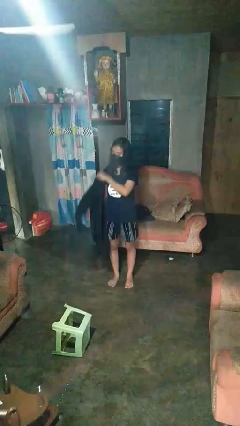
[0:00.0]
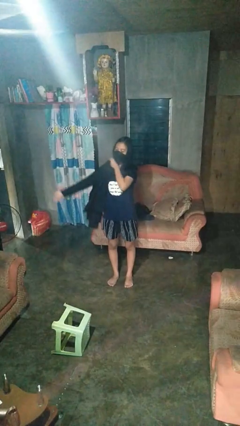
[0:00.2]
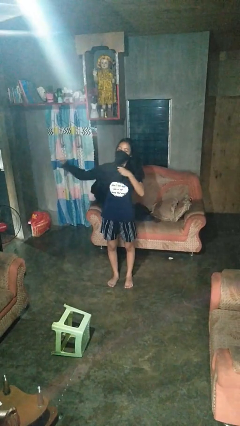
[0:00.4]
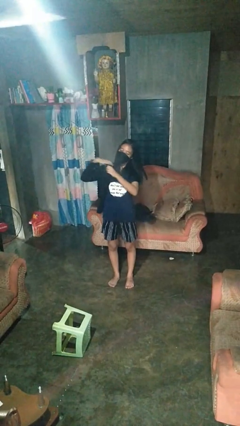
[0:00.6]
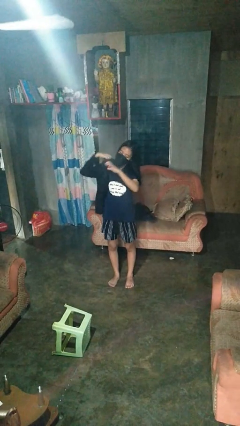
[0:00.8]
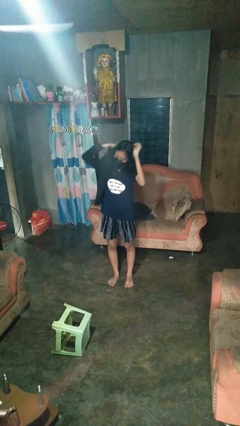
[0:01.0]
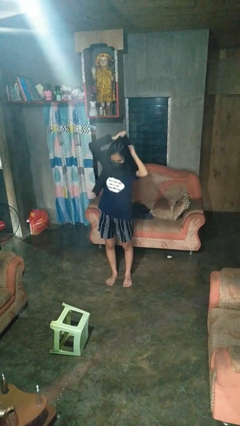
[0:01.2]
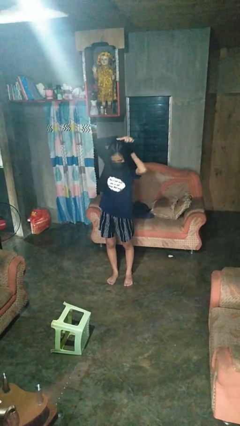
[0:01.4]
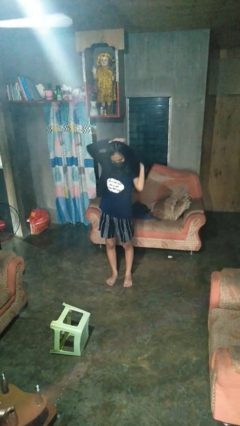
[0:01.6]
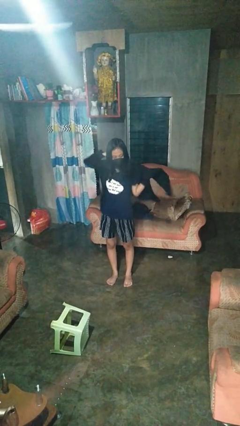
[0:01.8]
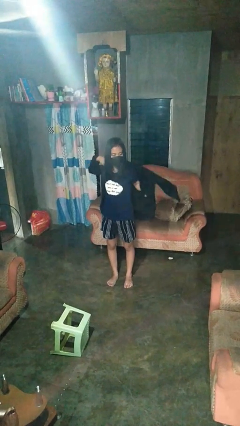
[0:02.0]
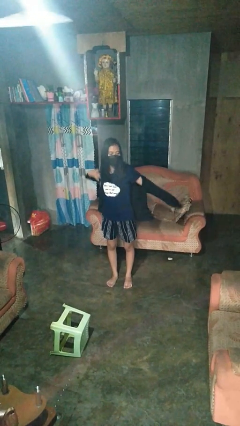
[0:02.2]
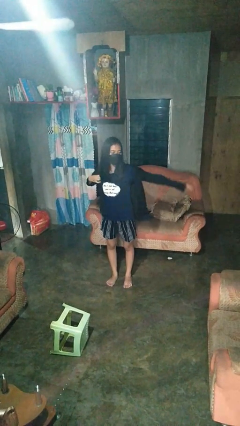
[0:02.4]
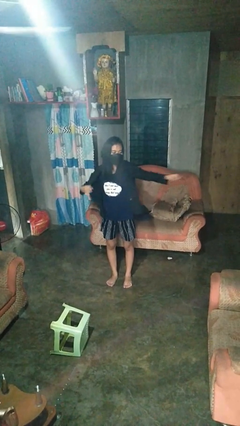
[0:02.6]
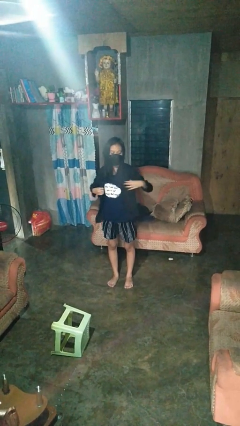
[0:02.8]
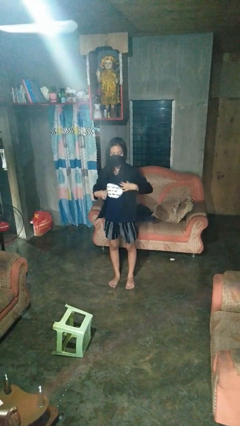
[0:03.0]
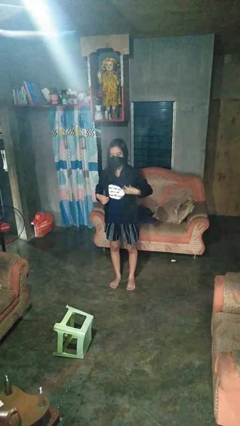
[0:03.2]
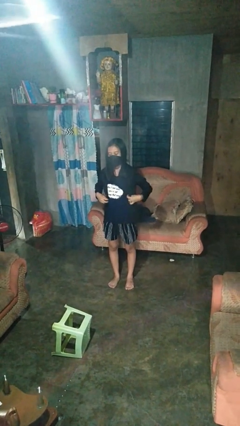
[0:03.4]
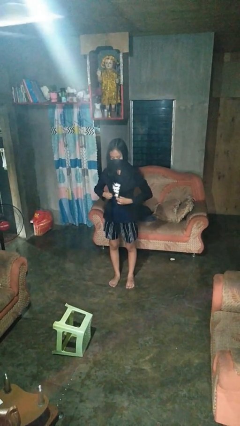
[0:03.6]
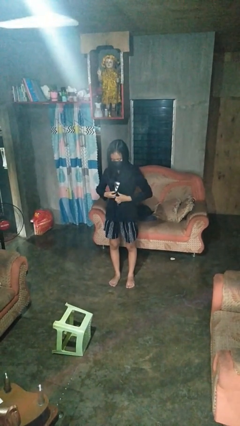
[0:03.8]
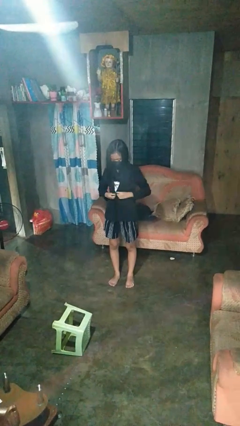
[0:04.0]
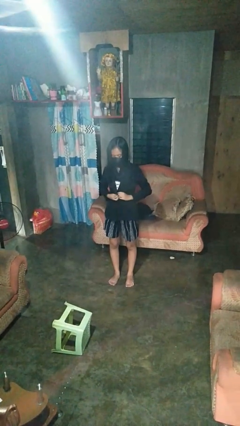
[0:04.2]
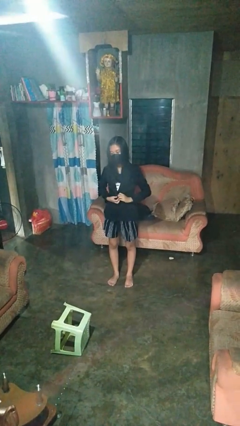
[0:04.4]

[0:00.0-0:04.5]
person puts on shirt

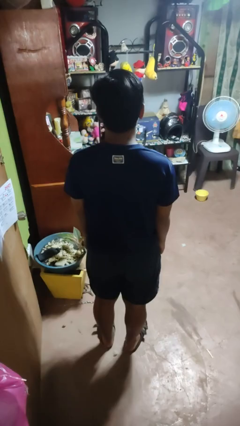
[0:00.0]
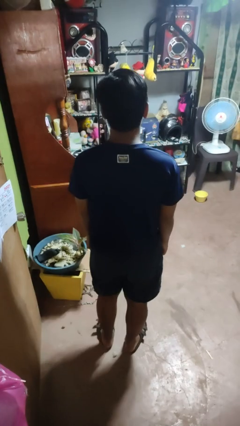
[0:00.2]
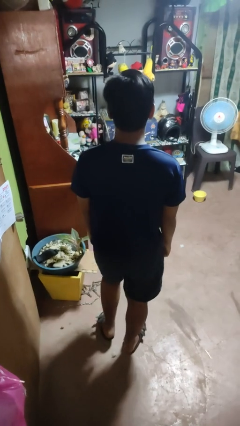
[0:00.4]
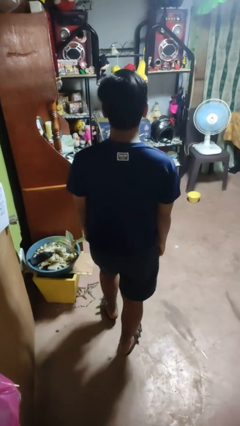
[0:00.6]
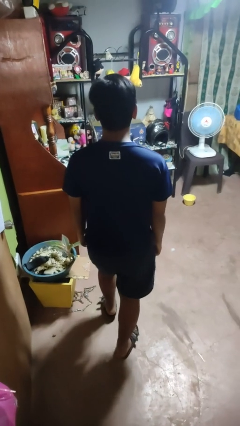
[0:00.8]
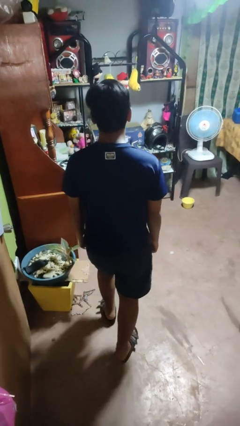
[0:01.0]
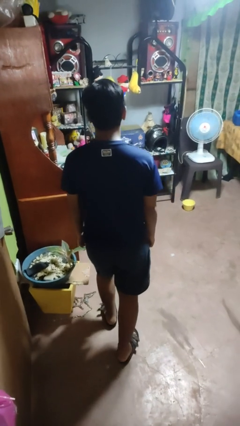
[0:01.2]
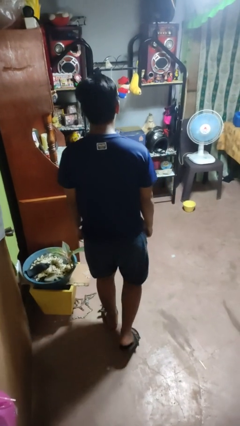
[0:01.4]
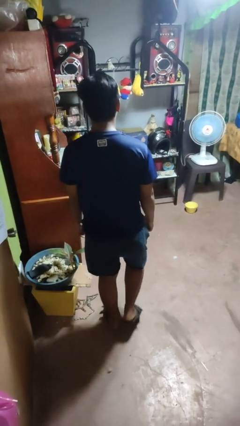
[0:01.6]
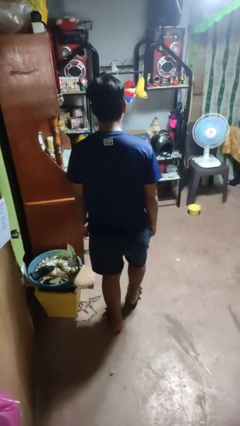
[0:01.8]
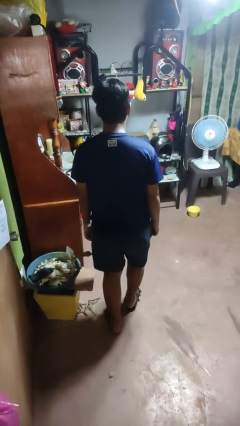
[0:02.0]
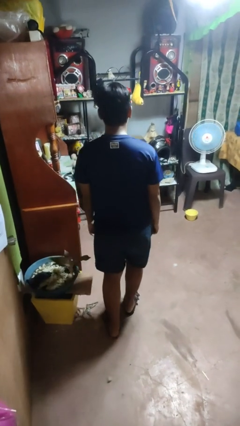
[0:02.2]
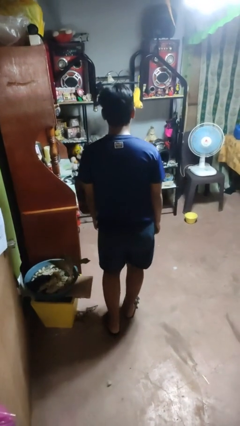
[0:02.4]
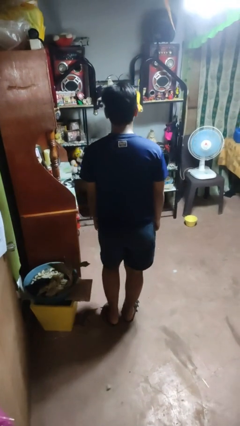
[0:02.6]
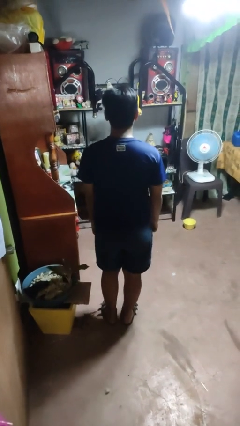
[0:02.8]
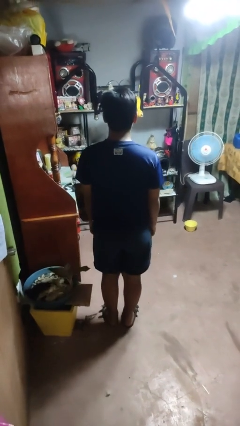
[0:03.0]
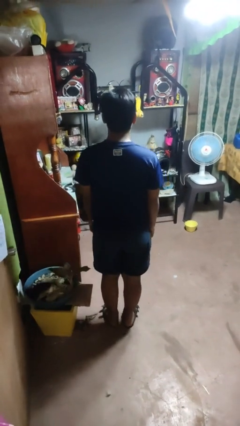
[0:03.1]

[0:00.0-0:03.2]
person walks tiptoe

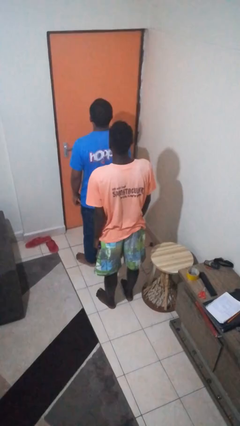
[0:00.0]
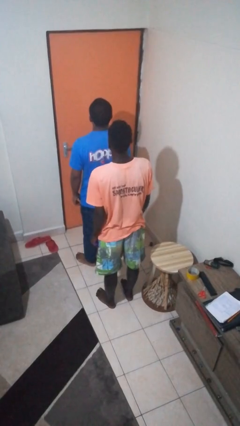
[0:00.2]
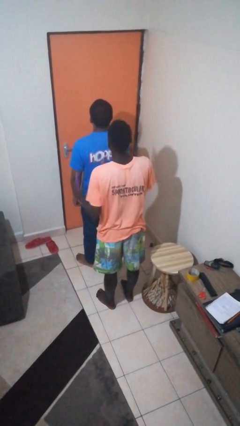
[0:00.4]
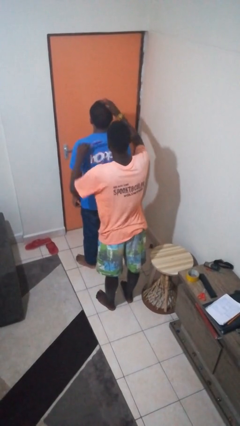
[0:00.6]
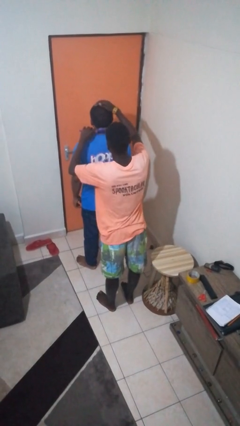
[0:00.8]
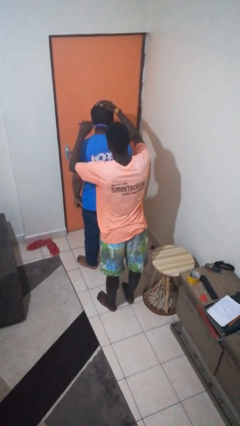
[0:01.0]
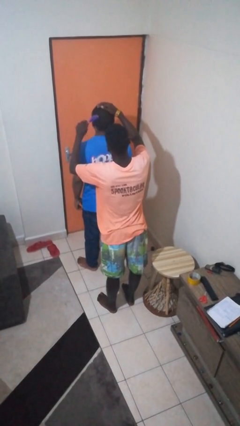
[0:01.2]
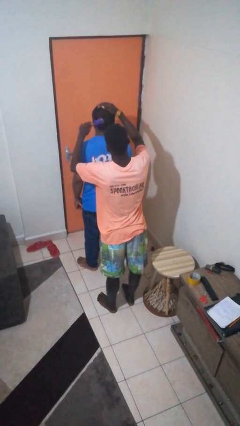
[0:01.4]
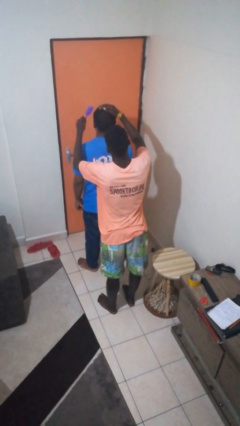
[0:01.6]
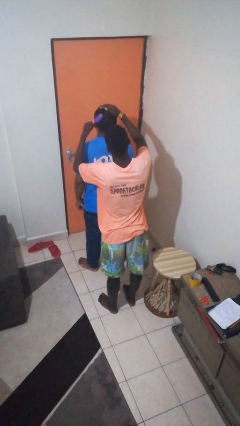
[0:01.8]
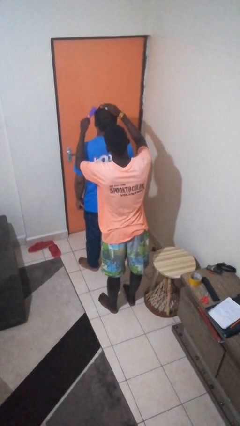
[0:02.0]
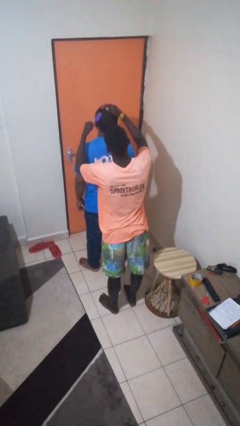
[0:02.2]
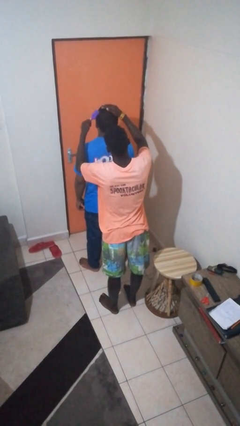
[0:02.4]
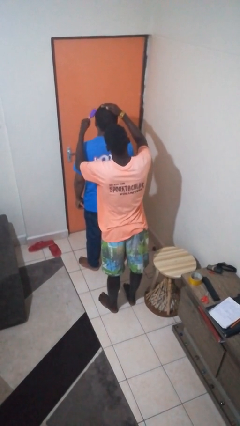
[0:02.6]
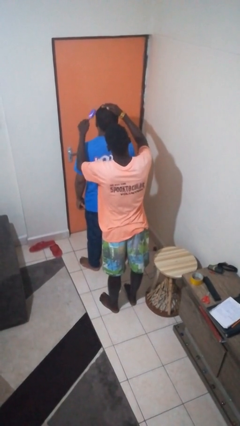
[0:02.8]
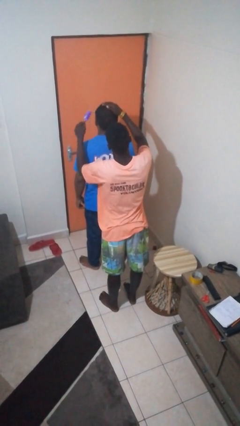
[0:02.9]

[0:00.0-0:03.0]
person brushes hair of person

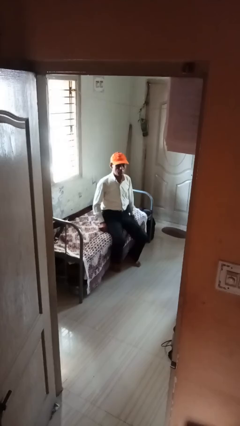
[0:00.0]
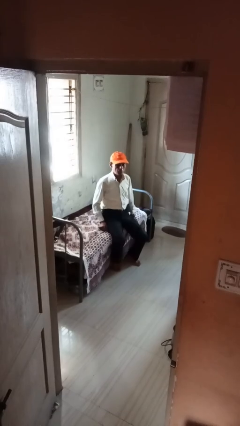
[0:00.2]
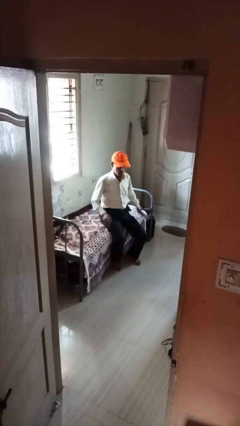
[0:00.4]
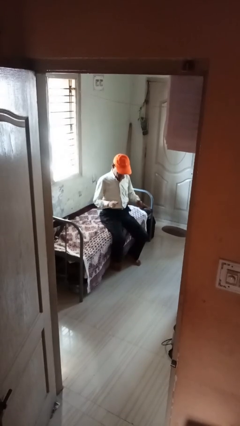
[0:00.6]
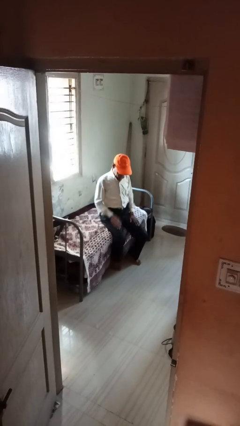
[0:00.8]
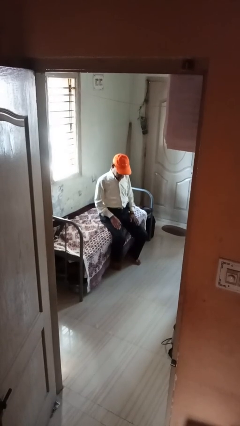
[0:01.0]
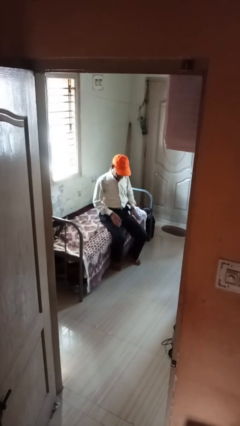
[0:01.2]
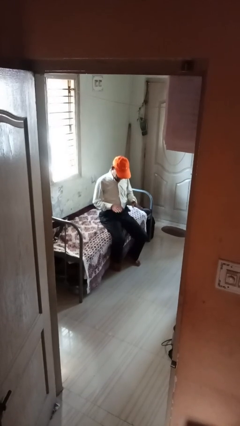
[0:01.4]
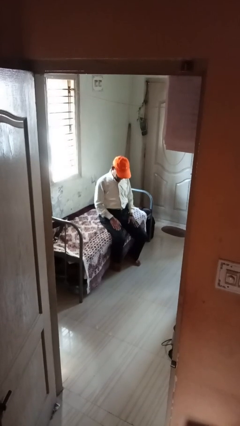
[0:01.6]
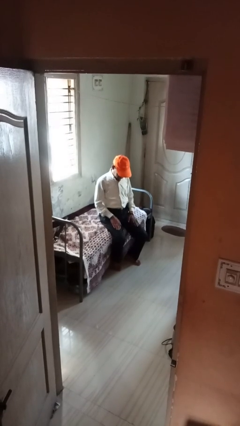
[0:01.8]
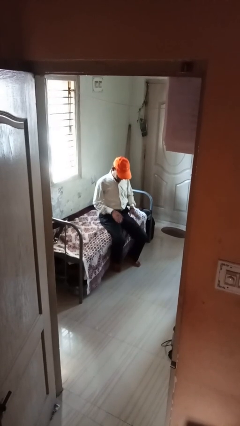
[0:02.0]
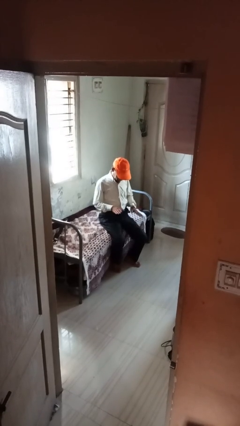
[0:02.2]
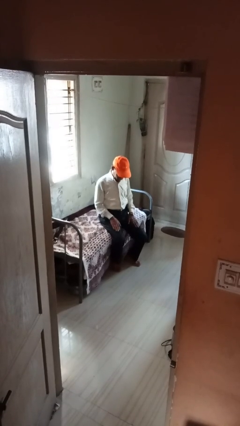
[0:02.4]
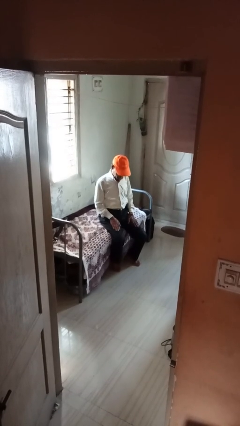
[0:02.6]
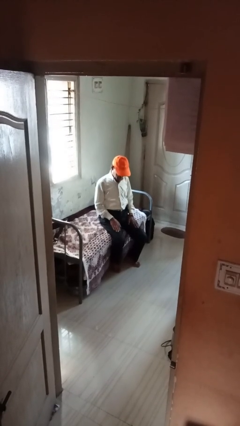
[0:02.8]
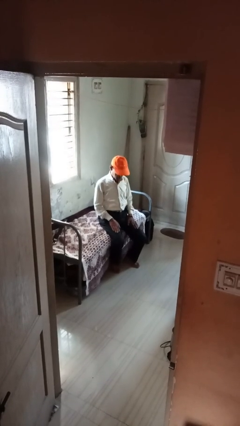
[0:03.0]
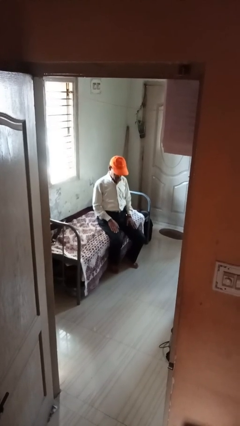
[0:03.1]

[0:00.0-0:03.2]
person slaps hands on thighs

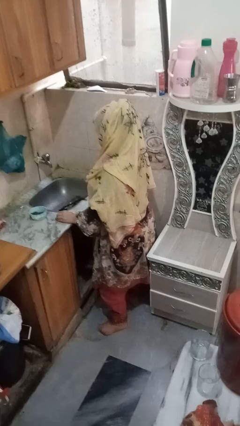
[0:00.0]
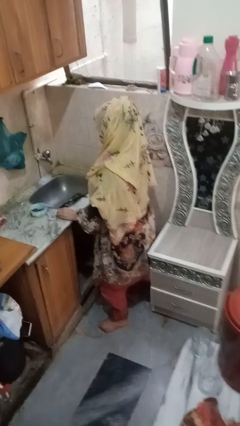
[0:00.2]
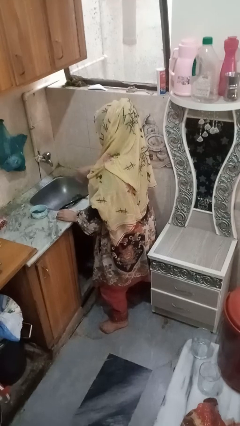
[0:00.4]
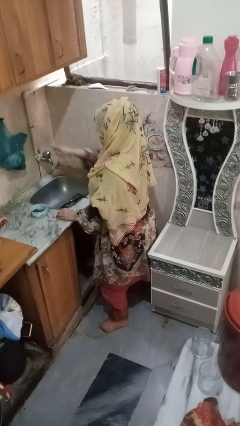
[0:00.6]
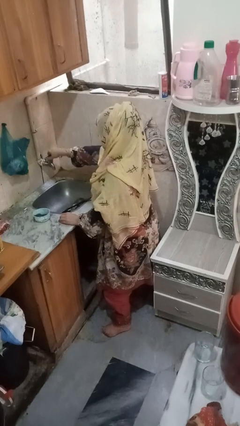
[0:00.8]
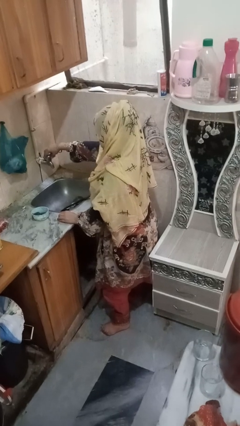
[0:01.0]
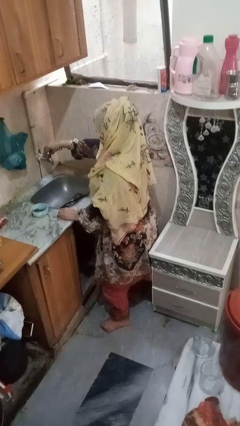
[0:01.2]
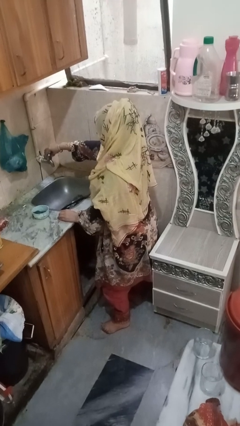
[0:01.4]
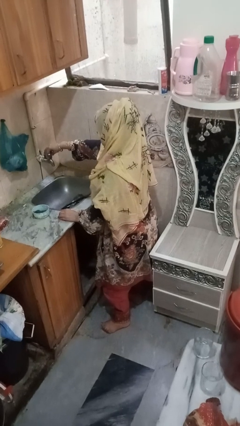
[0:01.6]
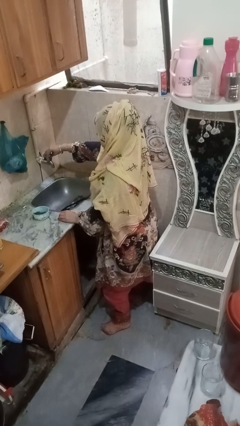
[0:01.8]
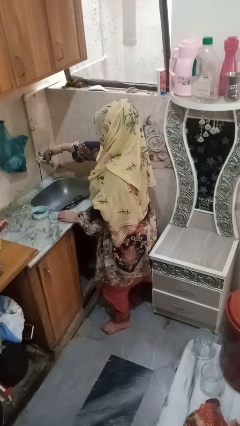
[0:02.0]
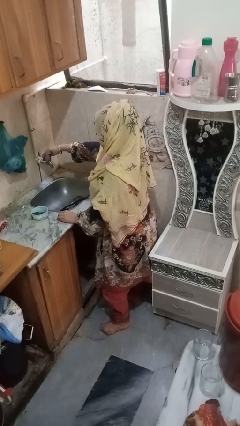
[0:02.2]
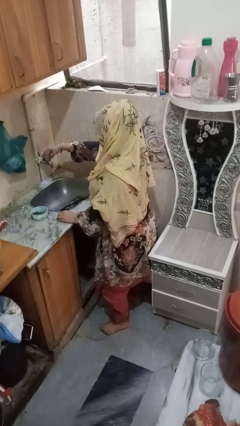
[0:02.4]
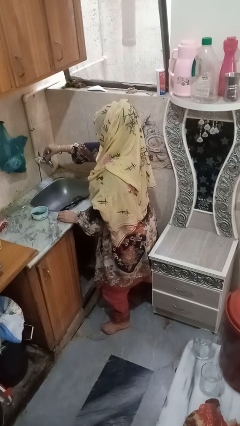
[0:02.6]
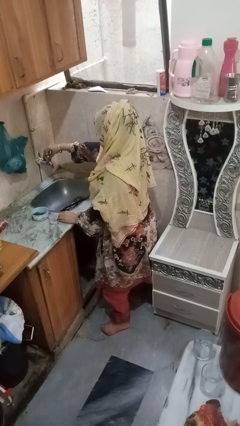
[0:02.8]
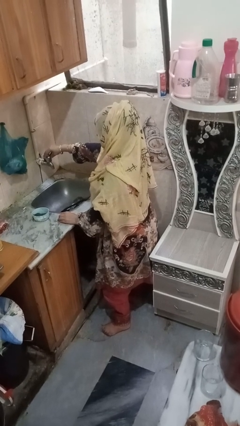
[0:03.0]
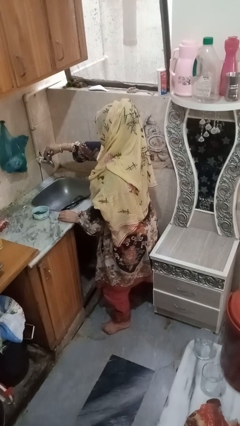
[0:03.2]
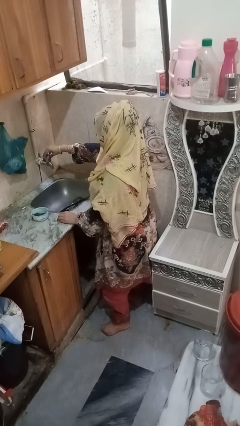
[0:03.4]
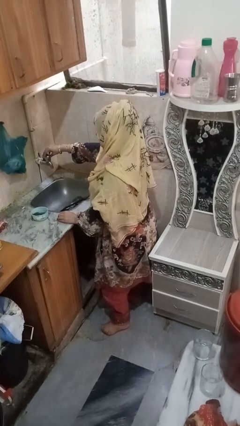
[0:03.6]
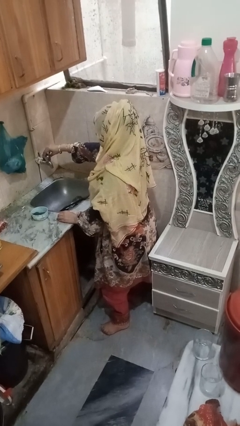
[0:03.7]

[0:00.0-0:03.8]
person turns on faucet
